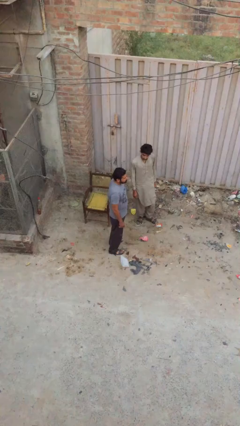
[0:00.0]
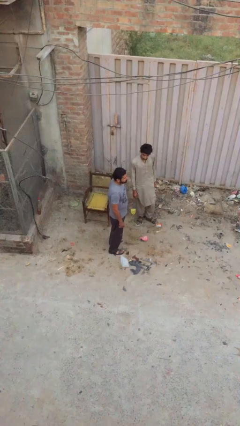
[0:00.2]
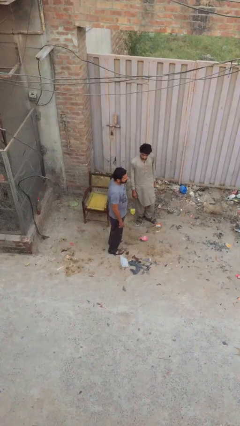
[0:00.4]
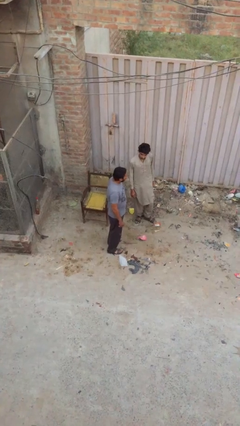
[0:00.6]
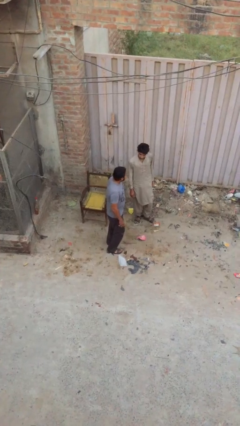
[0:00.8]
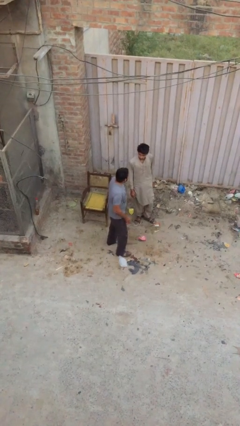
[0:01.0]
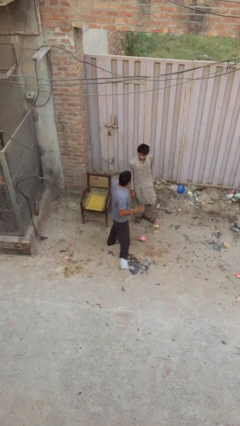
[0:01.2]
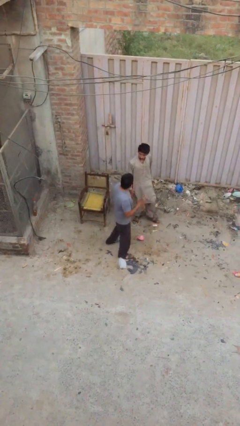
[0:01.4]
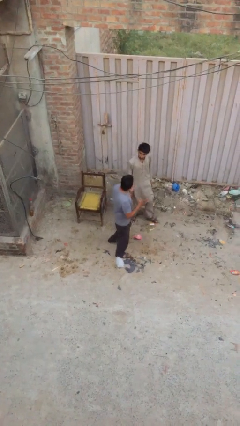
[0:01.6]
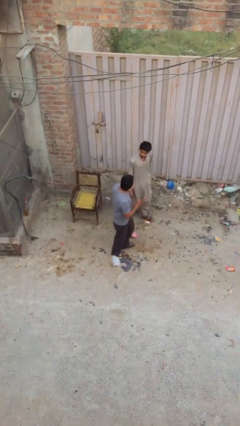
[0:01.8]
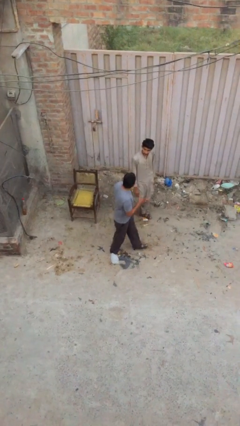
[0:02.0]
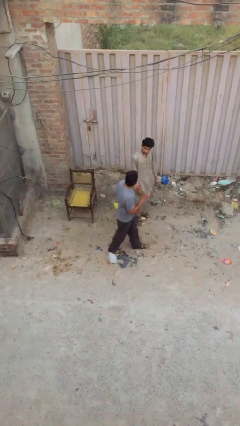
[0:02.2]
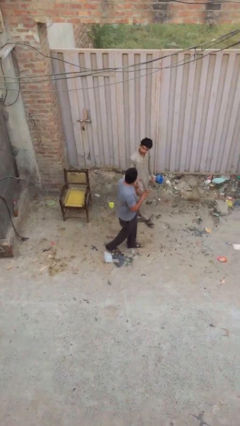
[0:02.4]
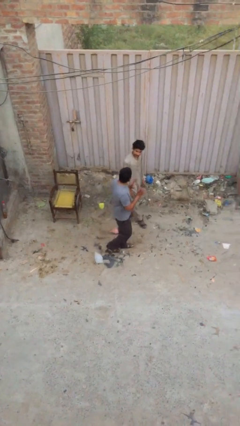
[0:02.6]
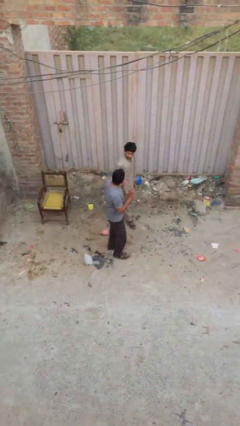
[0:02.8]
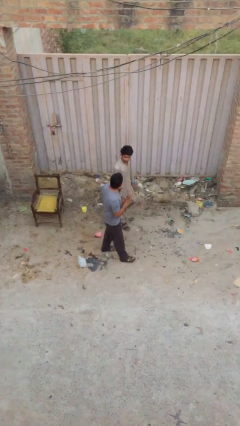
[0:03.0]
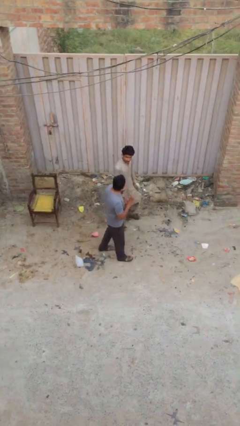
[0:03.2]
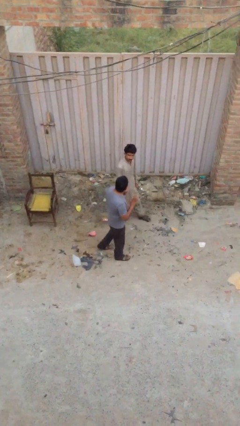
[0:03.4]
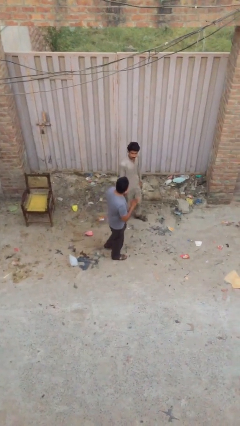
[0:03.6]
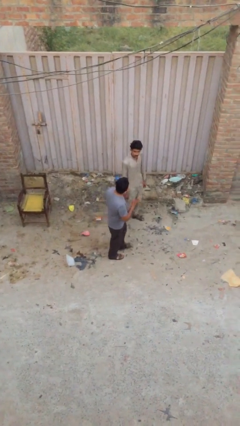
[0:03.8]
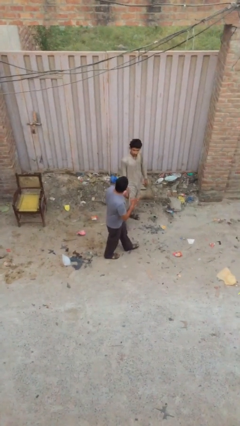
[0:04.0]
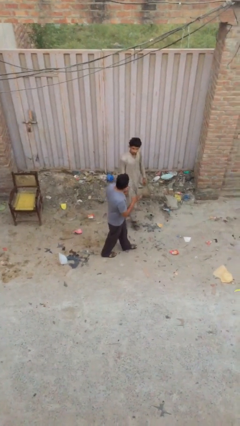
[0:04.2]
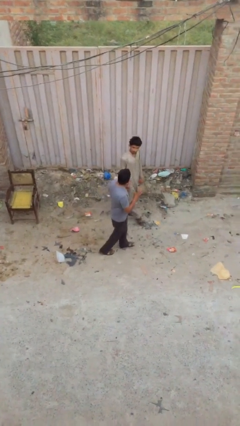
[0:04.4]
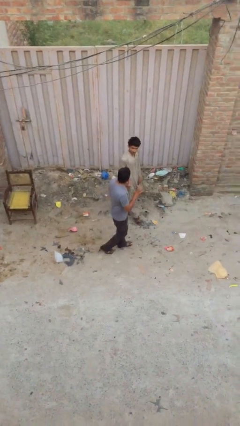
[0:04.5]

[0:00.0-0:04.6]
person talks to person

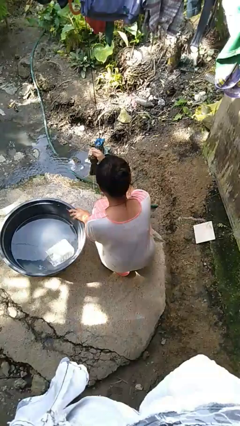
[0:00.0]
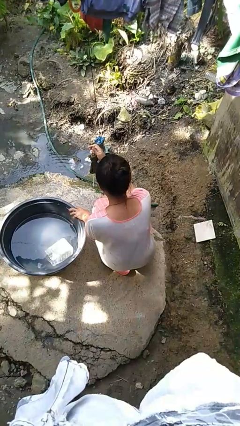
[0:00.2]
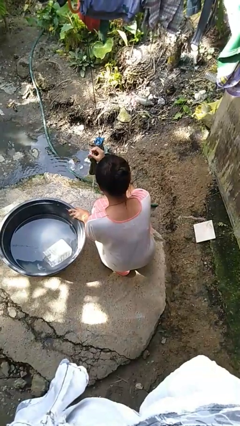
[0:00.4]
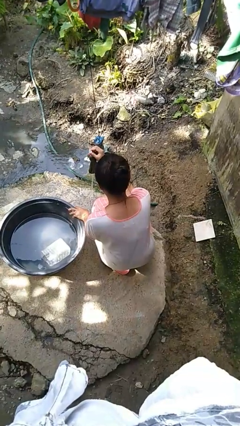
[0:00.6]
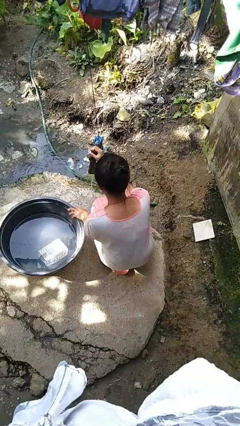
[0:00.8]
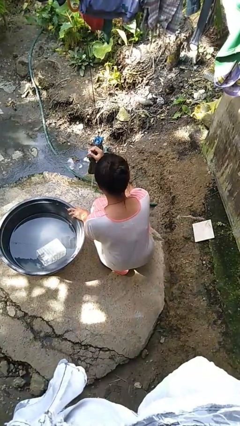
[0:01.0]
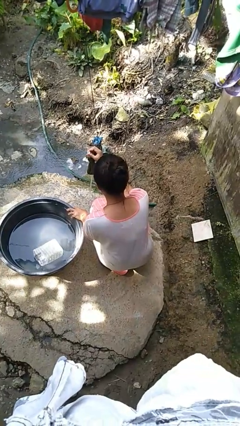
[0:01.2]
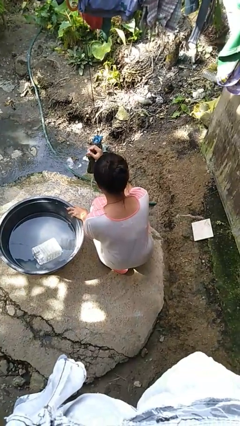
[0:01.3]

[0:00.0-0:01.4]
person turns on faucet

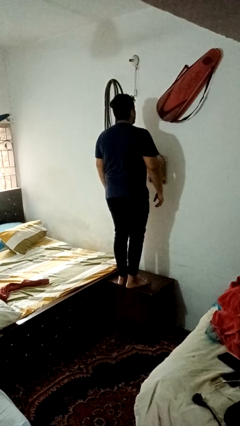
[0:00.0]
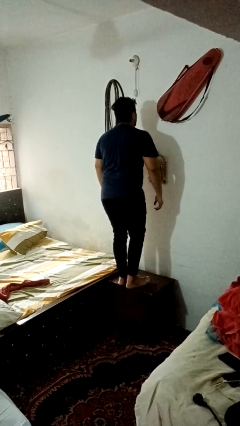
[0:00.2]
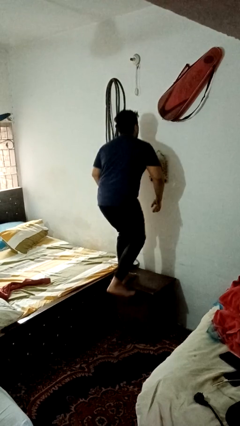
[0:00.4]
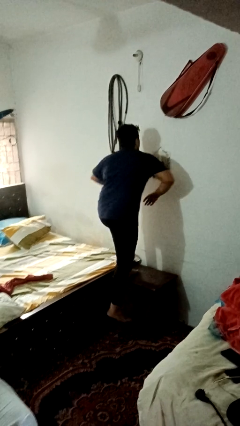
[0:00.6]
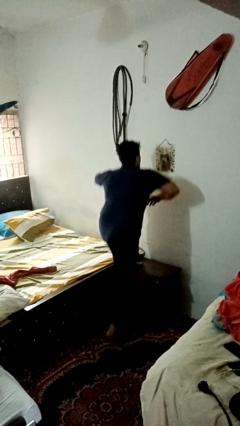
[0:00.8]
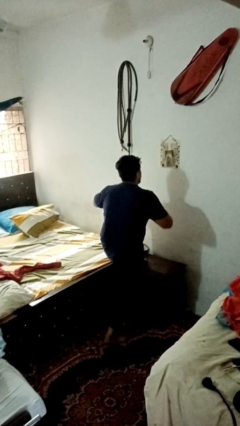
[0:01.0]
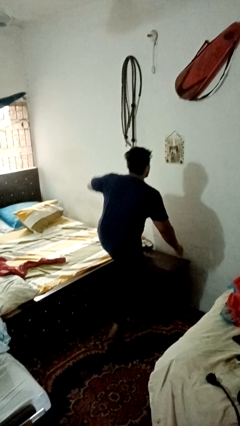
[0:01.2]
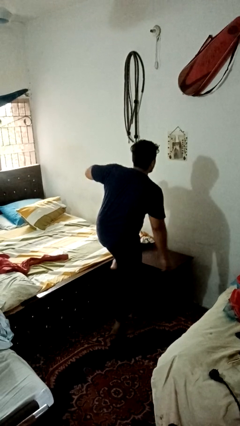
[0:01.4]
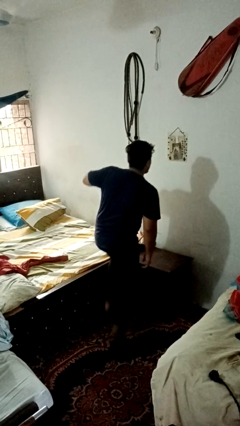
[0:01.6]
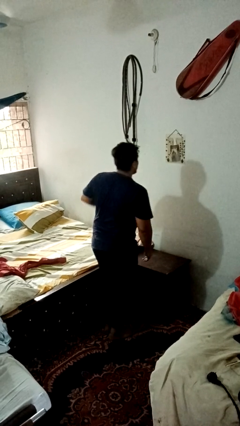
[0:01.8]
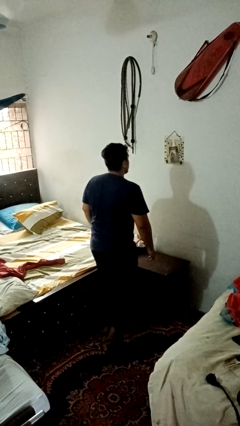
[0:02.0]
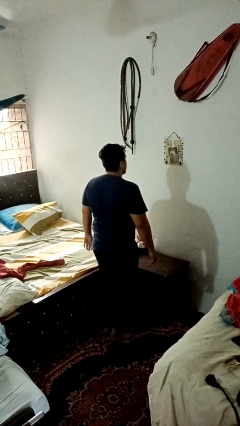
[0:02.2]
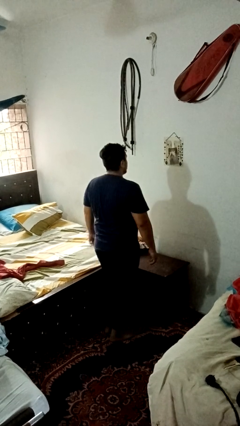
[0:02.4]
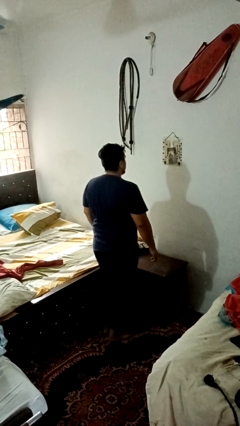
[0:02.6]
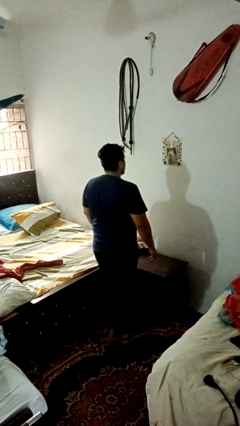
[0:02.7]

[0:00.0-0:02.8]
person climbs off table

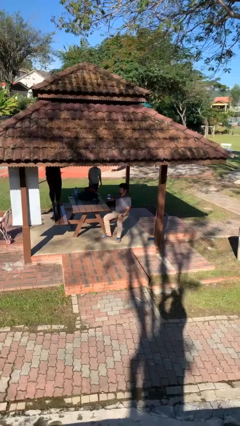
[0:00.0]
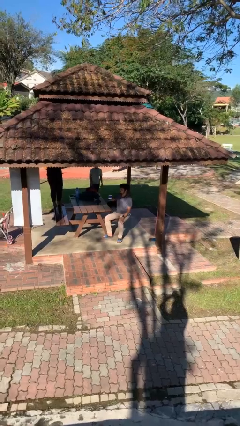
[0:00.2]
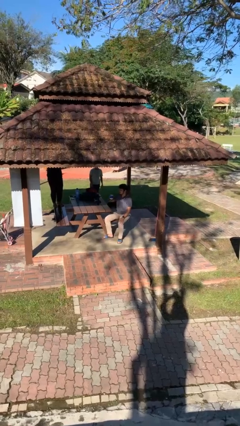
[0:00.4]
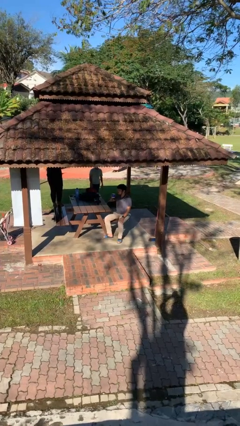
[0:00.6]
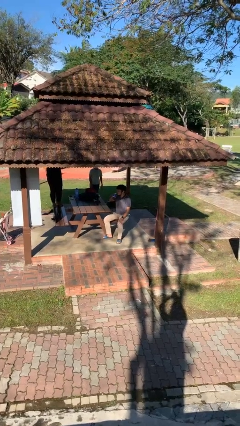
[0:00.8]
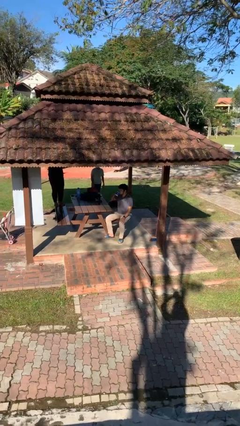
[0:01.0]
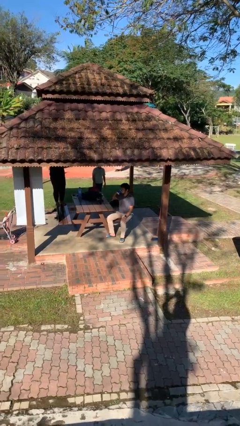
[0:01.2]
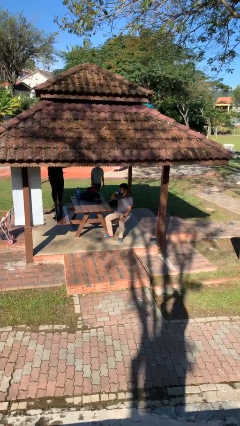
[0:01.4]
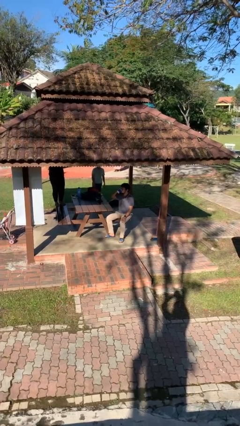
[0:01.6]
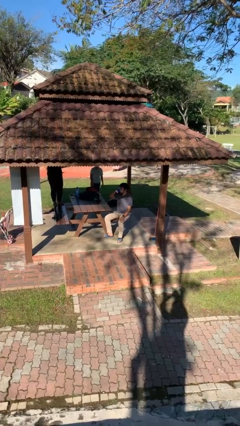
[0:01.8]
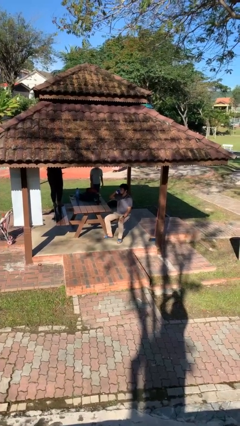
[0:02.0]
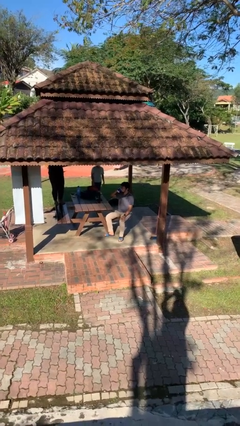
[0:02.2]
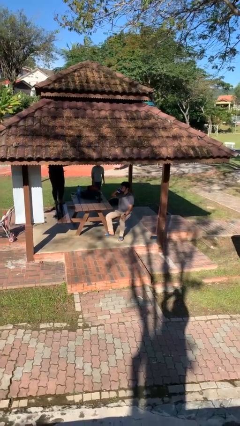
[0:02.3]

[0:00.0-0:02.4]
person drinks from mug

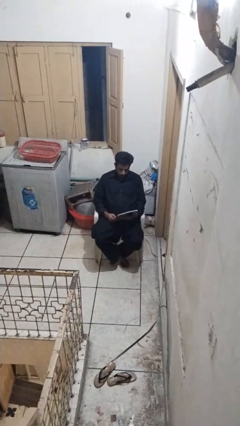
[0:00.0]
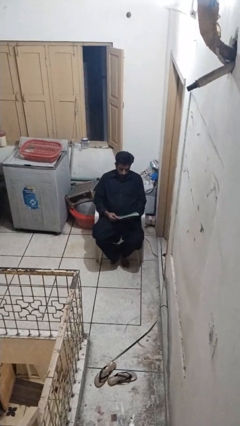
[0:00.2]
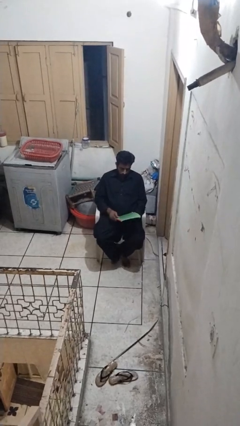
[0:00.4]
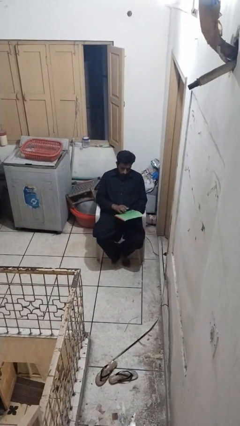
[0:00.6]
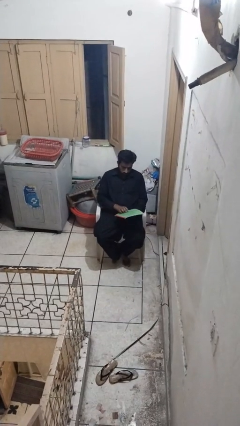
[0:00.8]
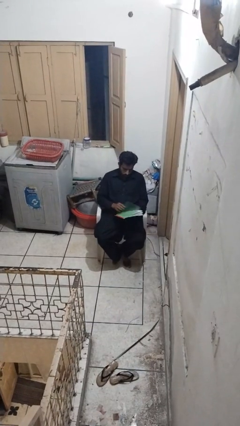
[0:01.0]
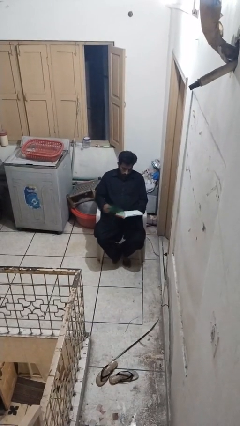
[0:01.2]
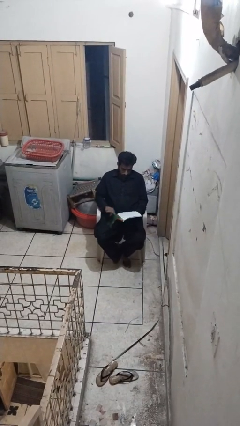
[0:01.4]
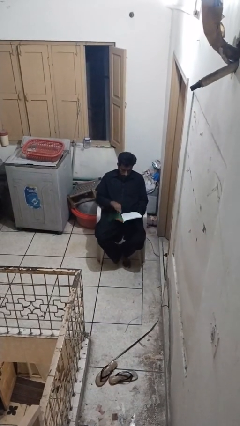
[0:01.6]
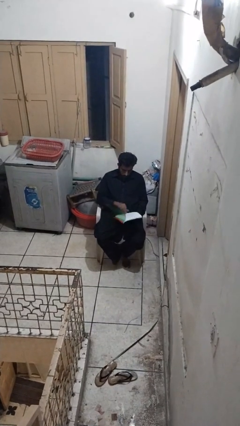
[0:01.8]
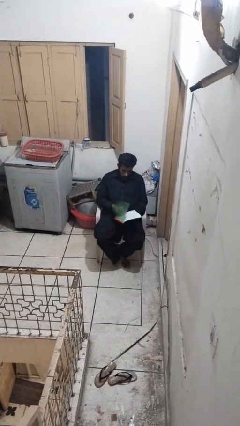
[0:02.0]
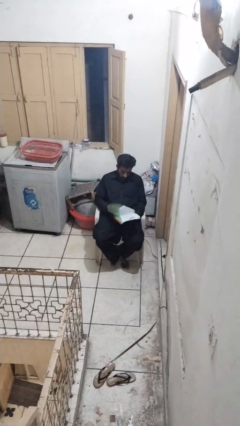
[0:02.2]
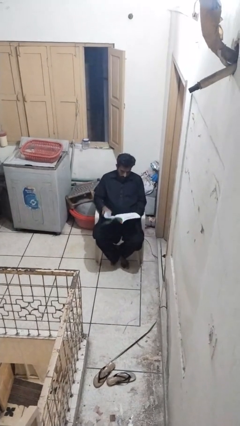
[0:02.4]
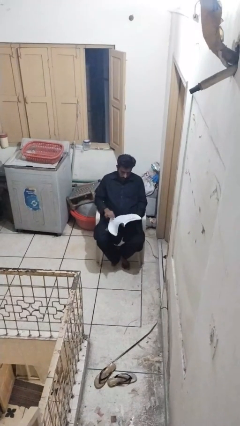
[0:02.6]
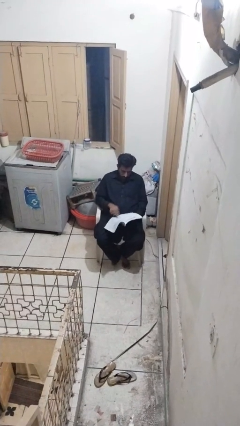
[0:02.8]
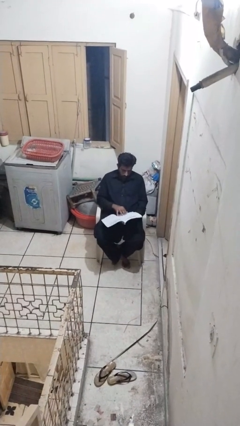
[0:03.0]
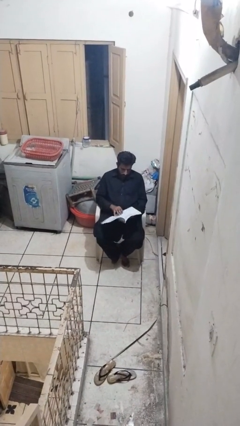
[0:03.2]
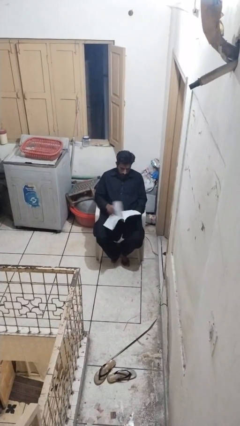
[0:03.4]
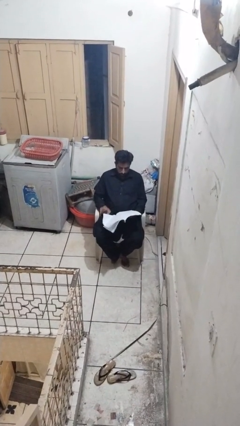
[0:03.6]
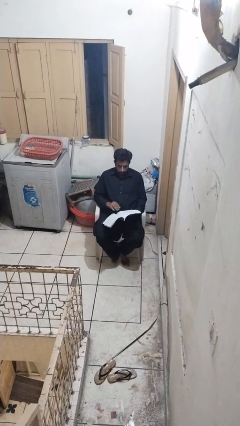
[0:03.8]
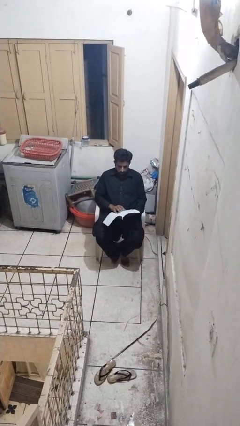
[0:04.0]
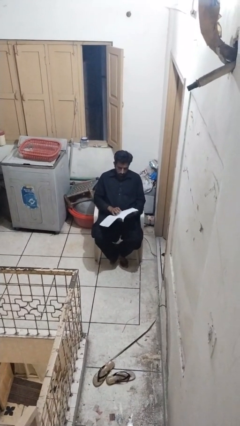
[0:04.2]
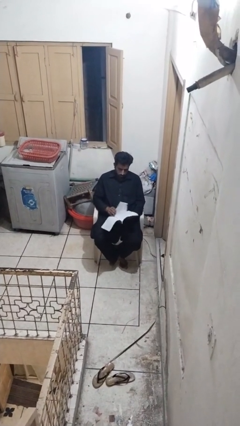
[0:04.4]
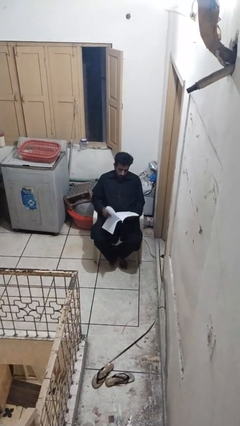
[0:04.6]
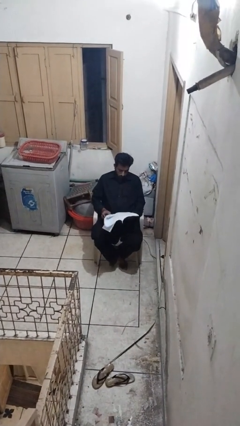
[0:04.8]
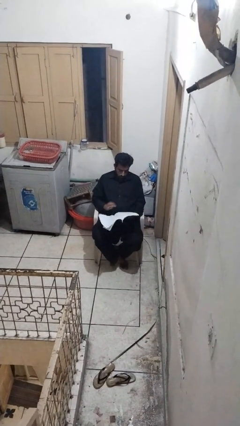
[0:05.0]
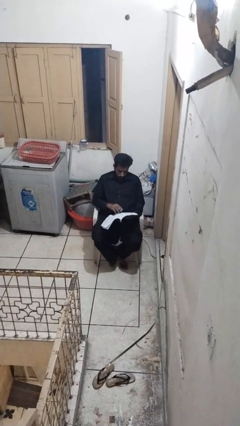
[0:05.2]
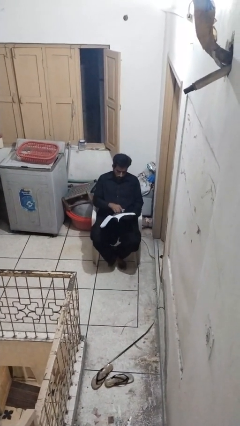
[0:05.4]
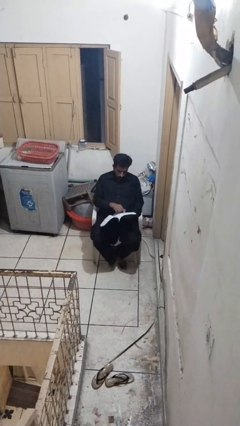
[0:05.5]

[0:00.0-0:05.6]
person reads magazine

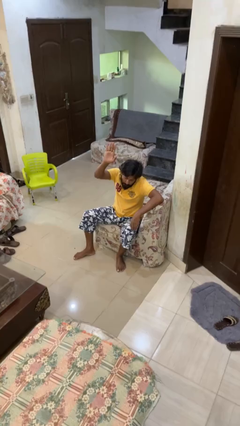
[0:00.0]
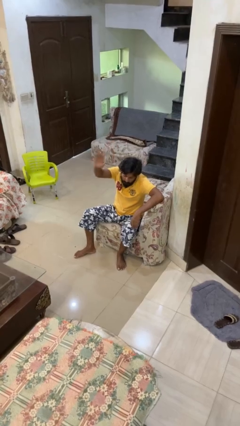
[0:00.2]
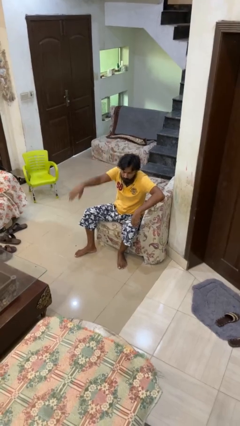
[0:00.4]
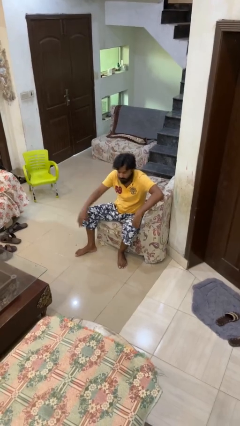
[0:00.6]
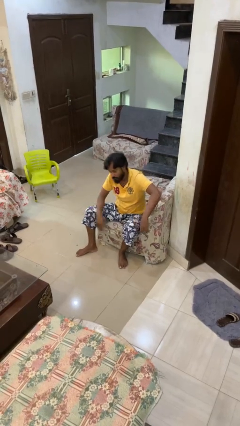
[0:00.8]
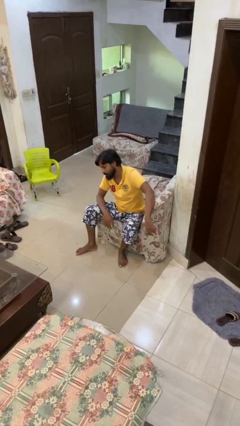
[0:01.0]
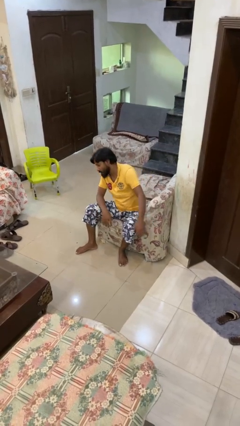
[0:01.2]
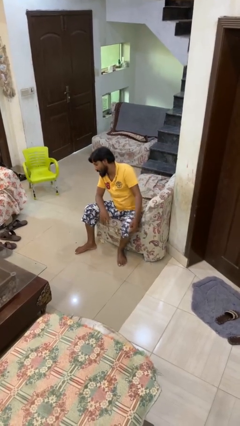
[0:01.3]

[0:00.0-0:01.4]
person gestures lower hand
